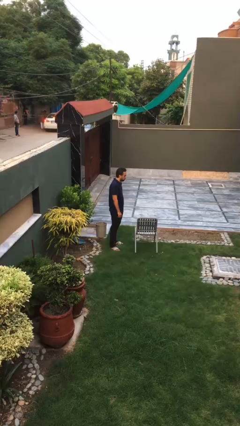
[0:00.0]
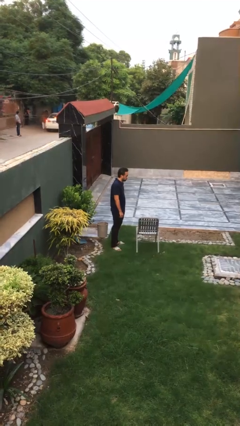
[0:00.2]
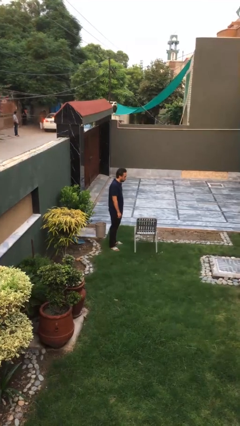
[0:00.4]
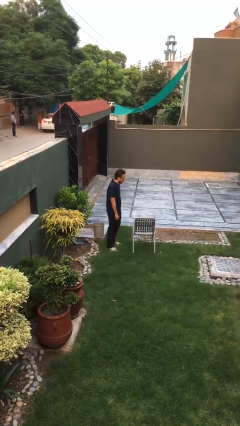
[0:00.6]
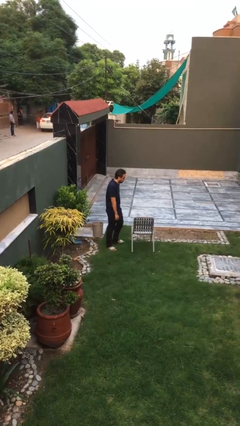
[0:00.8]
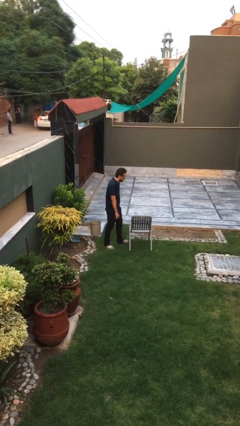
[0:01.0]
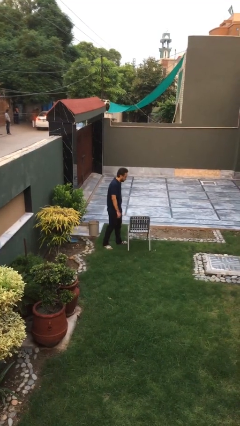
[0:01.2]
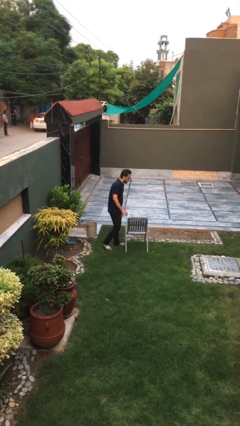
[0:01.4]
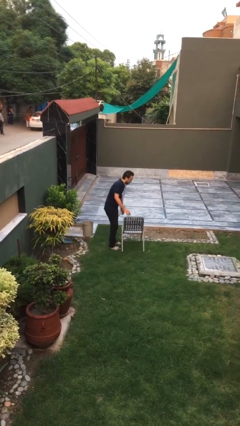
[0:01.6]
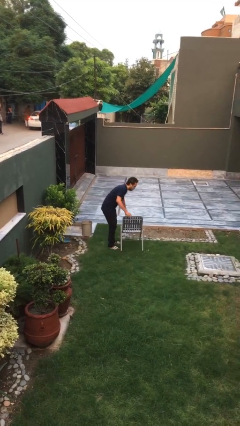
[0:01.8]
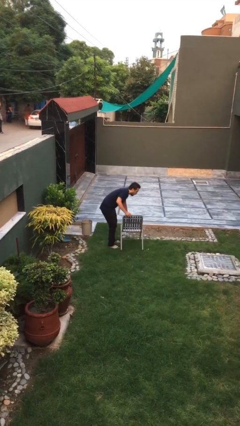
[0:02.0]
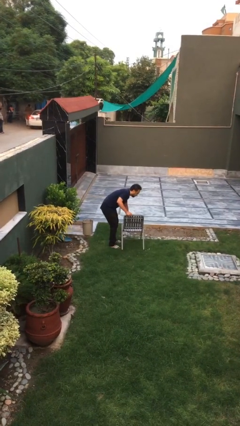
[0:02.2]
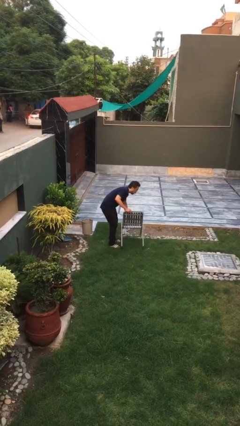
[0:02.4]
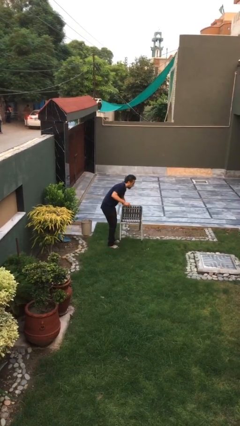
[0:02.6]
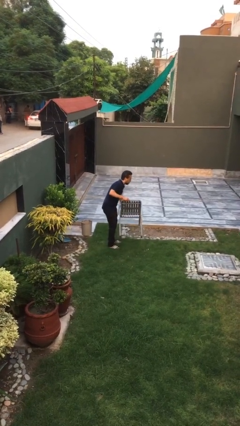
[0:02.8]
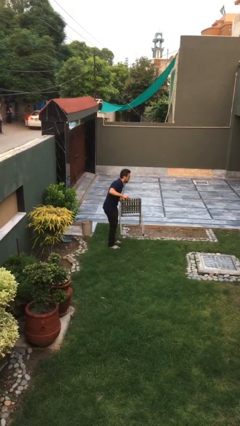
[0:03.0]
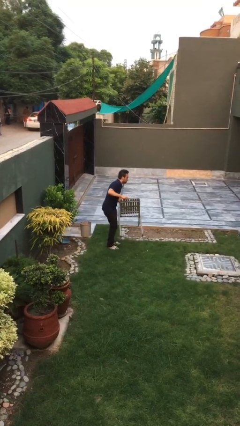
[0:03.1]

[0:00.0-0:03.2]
person picks up object from floor

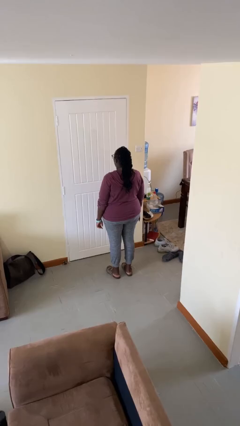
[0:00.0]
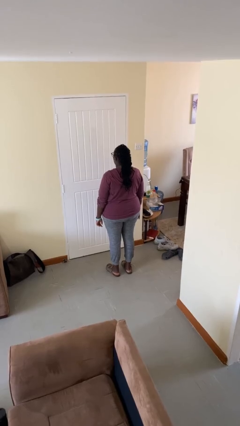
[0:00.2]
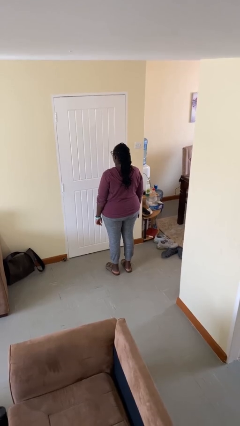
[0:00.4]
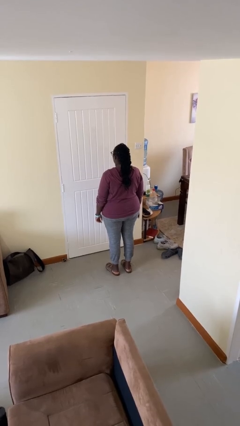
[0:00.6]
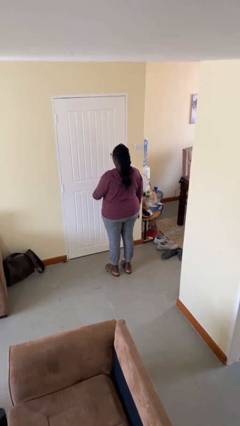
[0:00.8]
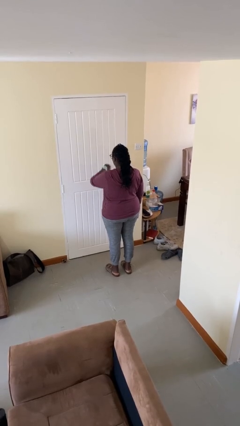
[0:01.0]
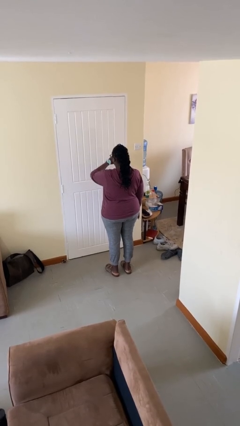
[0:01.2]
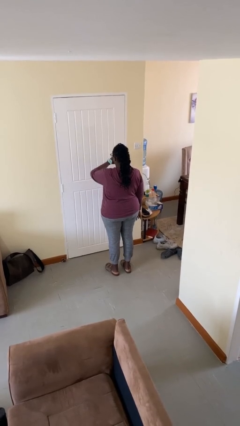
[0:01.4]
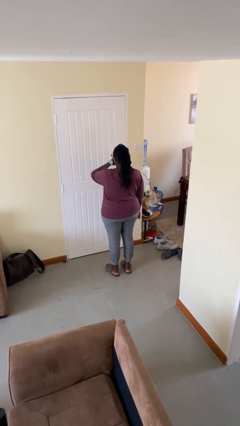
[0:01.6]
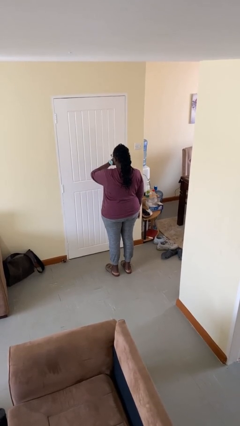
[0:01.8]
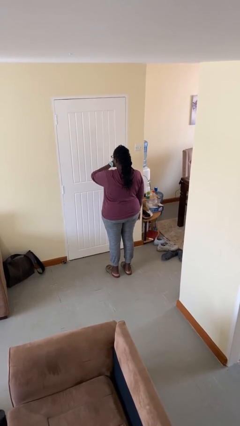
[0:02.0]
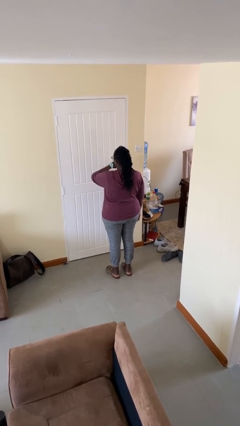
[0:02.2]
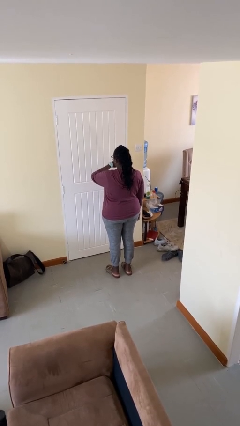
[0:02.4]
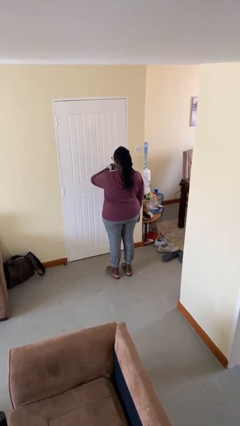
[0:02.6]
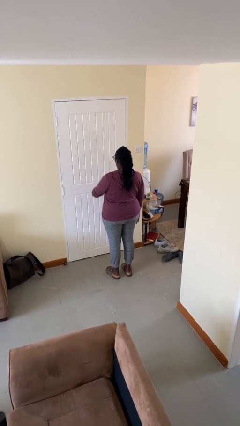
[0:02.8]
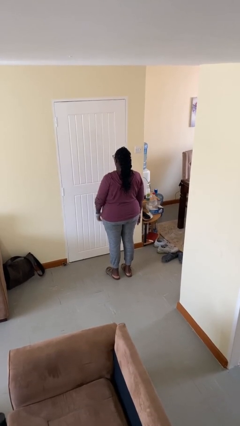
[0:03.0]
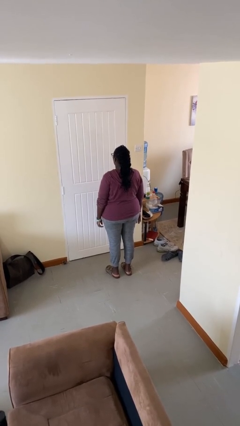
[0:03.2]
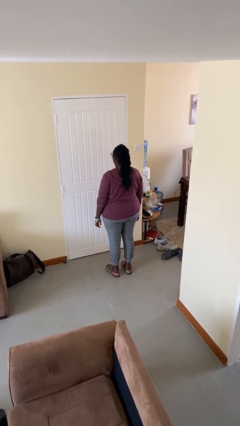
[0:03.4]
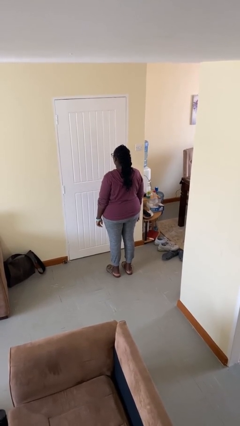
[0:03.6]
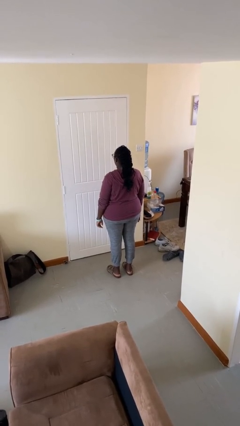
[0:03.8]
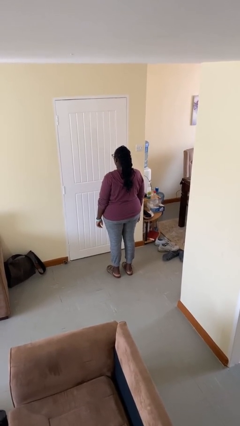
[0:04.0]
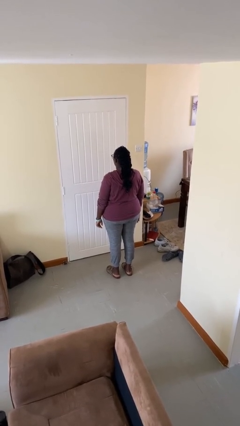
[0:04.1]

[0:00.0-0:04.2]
person looks at wristwatch

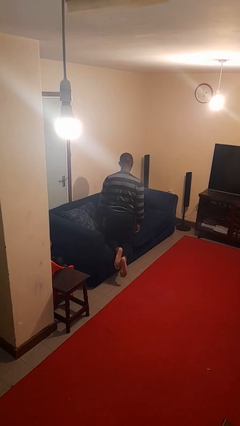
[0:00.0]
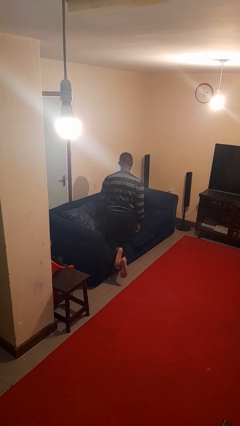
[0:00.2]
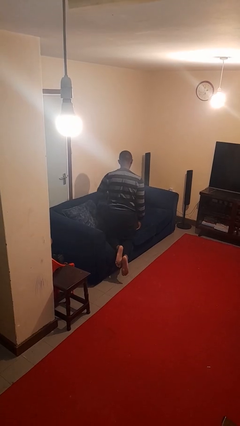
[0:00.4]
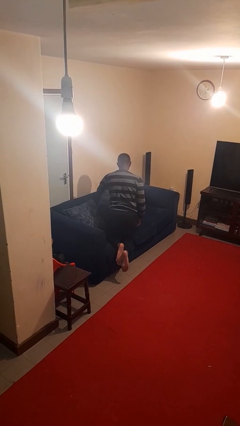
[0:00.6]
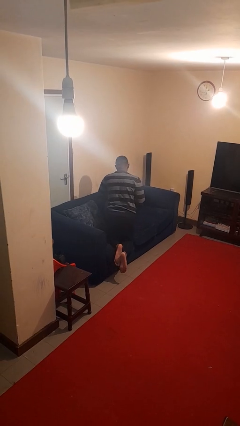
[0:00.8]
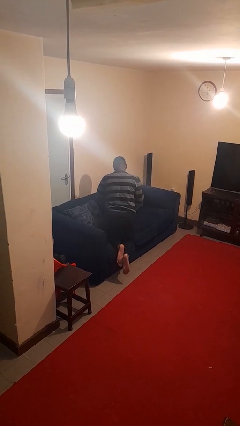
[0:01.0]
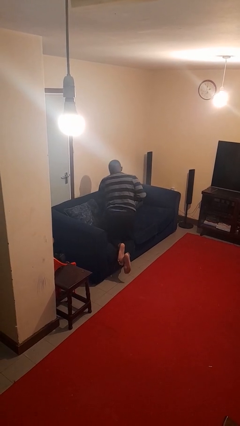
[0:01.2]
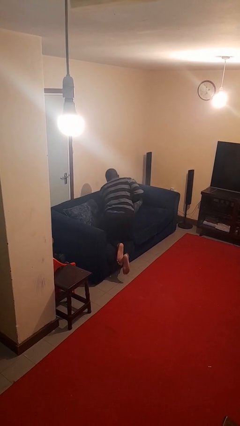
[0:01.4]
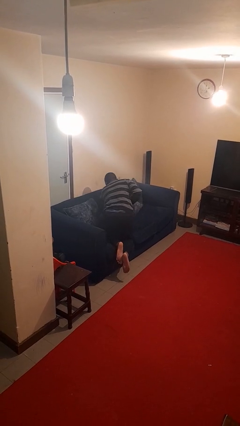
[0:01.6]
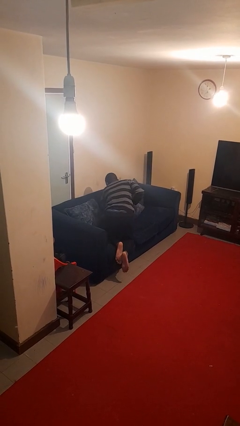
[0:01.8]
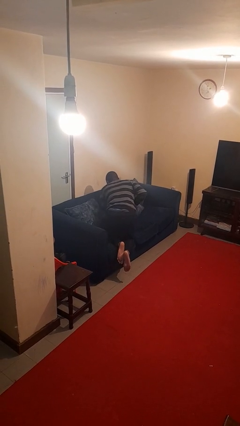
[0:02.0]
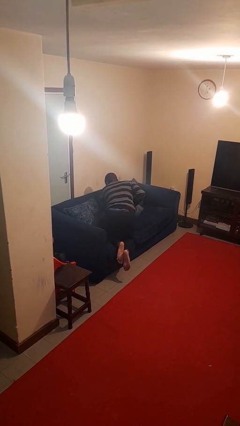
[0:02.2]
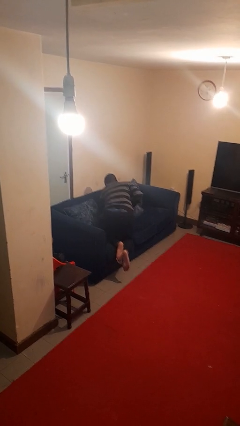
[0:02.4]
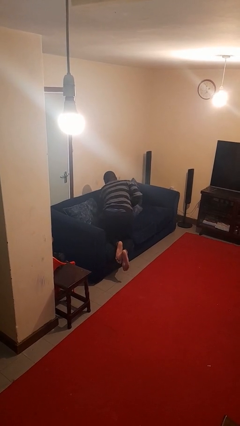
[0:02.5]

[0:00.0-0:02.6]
person searches in couch

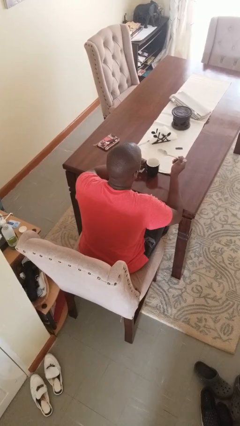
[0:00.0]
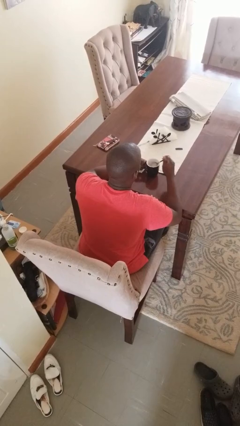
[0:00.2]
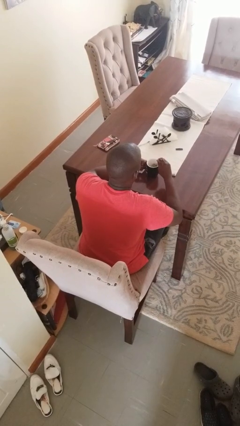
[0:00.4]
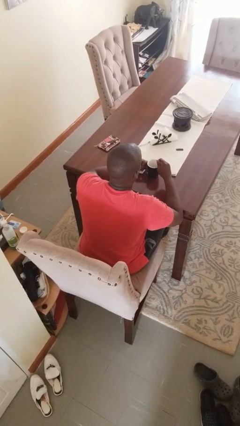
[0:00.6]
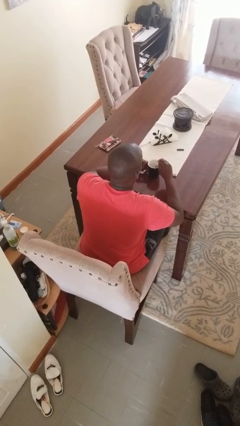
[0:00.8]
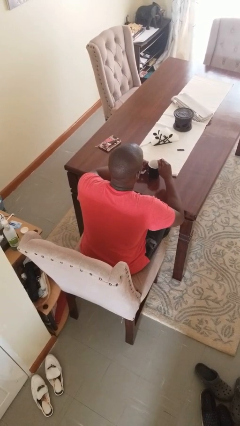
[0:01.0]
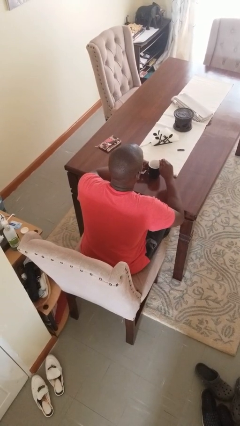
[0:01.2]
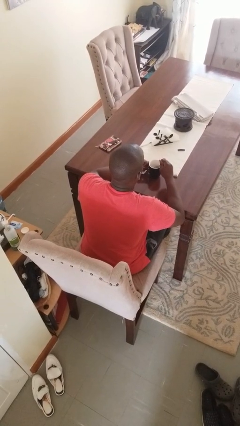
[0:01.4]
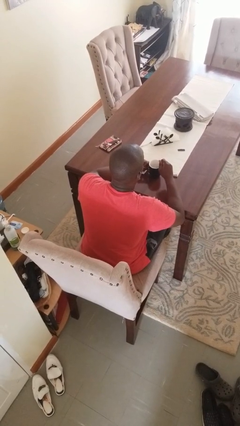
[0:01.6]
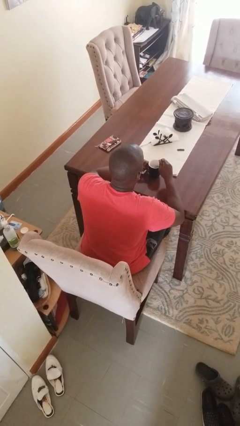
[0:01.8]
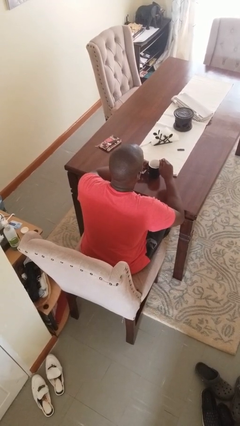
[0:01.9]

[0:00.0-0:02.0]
person stirs mug

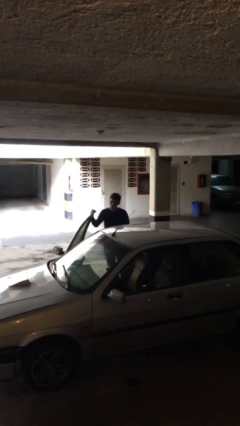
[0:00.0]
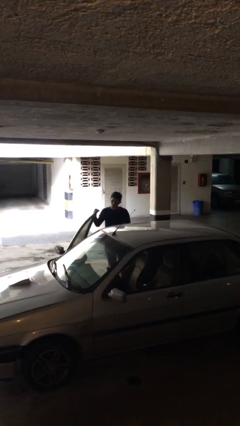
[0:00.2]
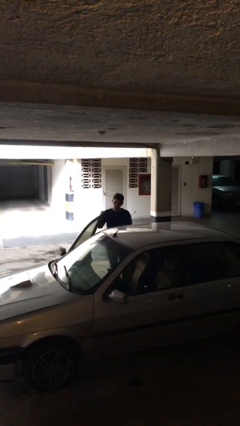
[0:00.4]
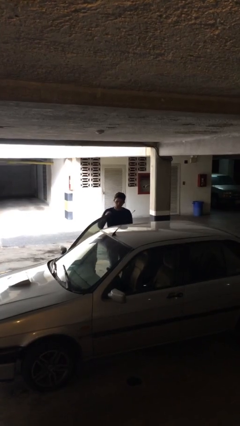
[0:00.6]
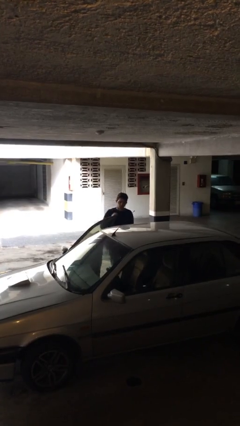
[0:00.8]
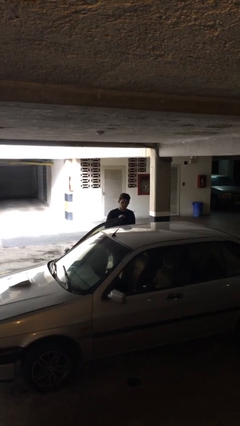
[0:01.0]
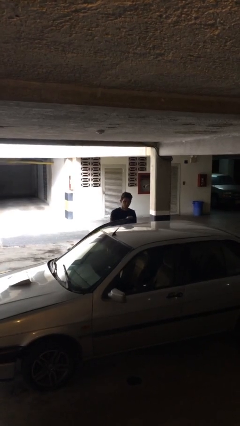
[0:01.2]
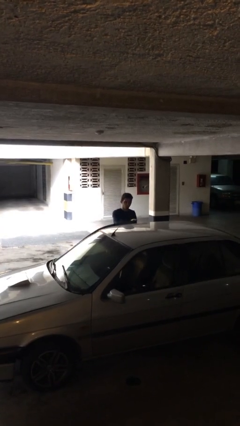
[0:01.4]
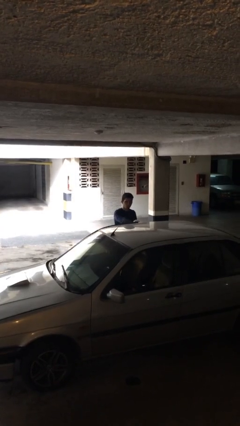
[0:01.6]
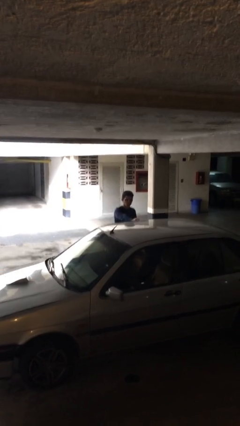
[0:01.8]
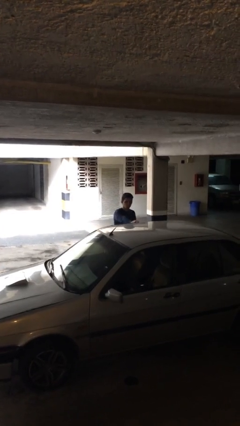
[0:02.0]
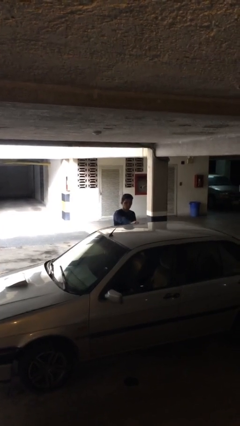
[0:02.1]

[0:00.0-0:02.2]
person closes car door

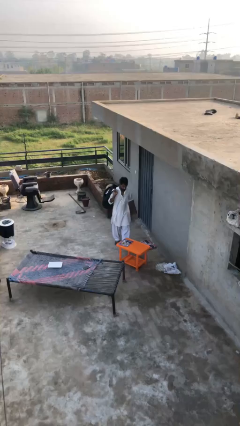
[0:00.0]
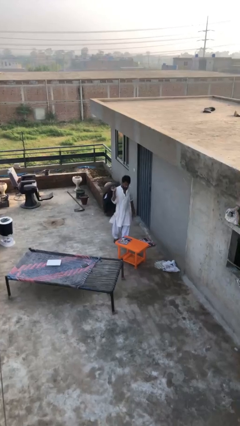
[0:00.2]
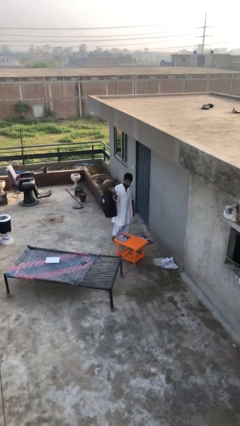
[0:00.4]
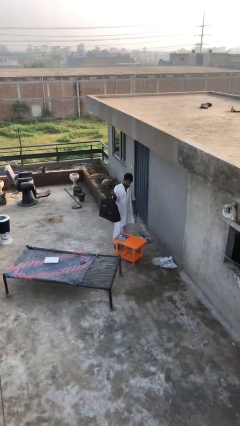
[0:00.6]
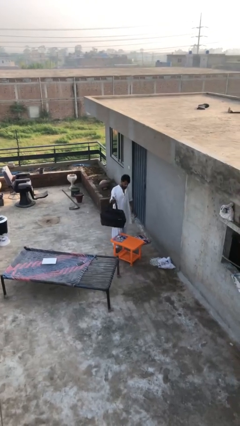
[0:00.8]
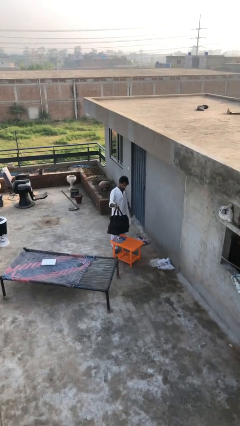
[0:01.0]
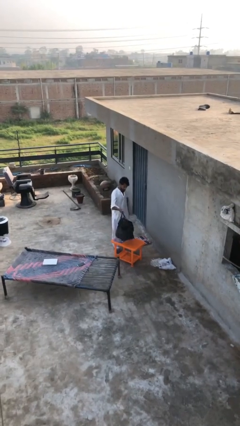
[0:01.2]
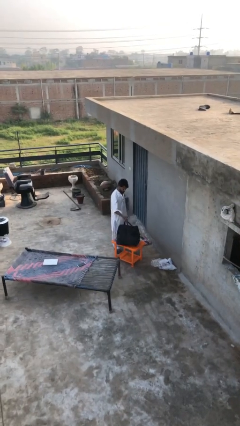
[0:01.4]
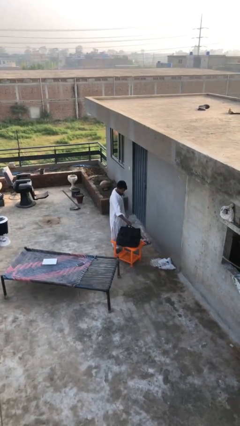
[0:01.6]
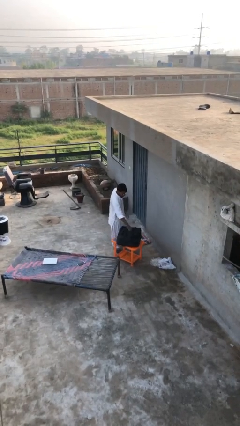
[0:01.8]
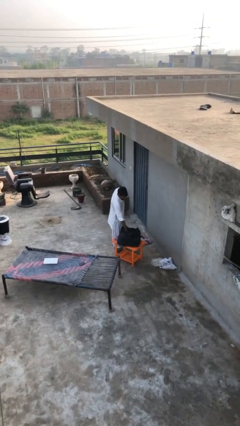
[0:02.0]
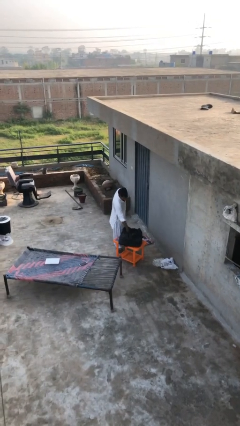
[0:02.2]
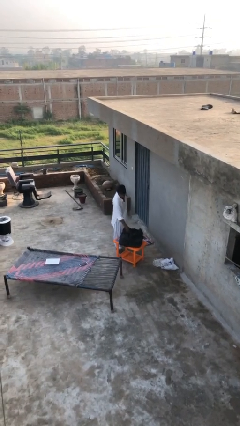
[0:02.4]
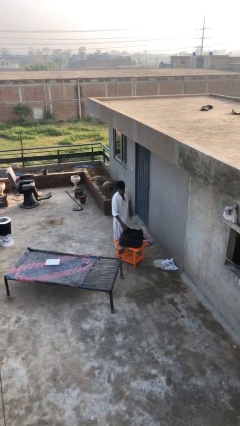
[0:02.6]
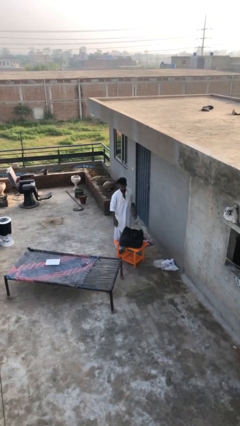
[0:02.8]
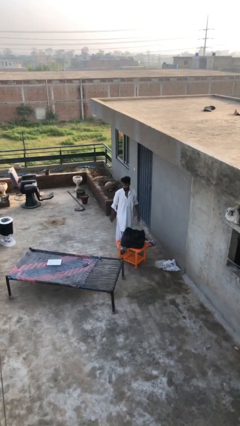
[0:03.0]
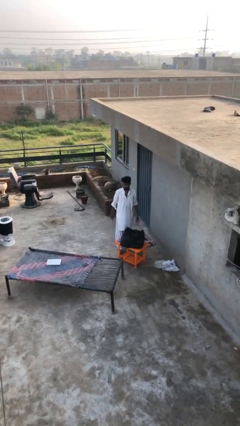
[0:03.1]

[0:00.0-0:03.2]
person puts down object on table
